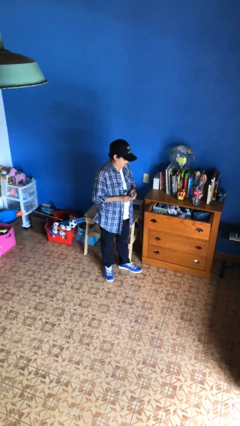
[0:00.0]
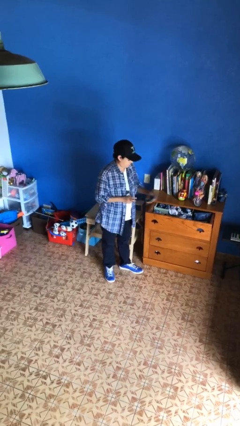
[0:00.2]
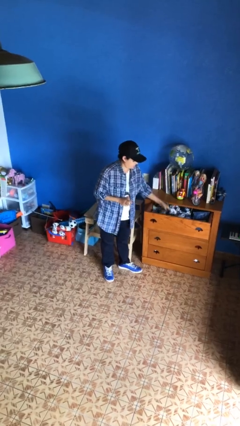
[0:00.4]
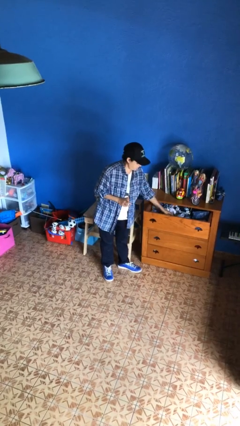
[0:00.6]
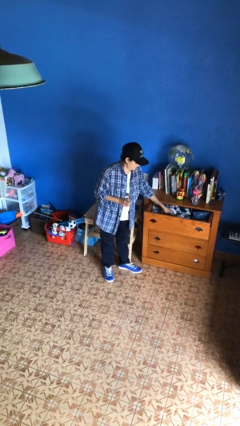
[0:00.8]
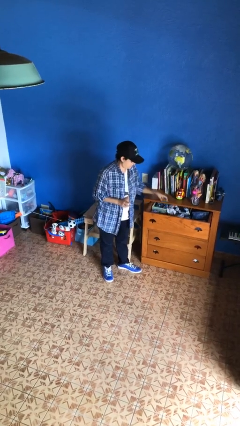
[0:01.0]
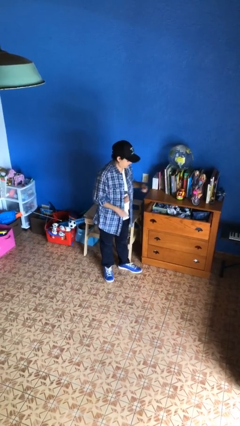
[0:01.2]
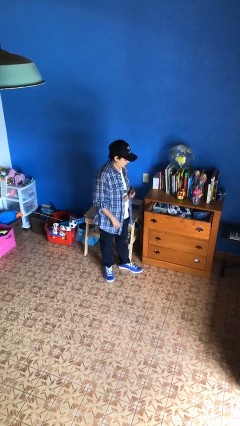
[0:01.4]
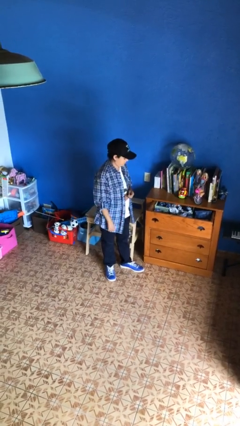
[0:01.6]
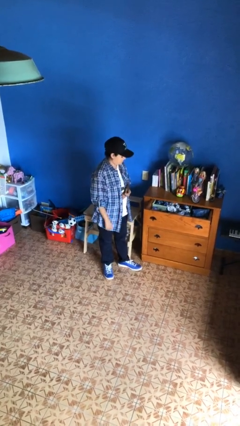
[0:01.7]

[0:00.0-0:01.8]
person puts clothes into dresser

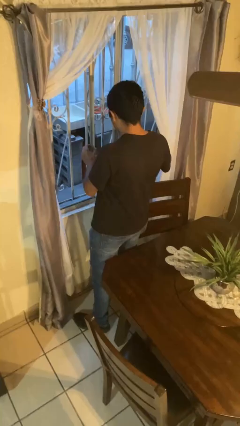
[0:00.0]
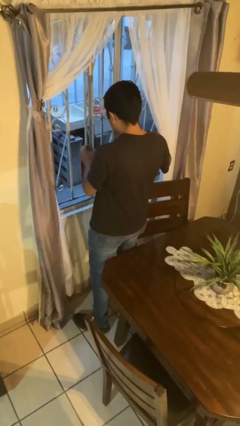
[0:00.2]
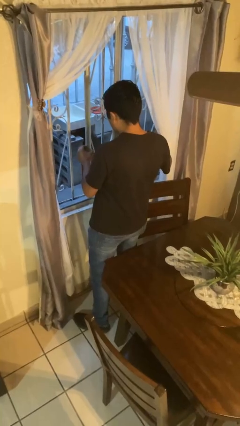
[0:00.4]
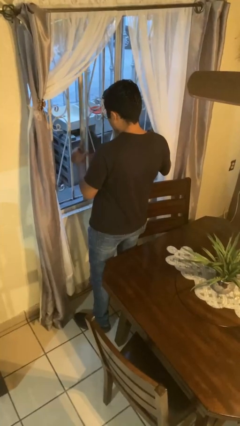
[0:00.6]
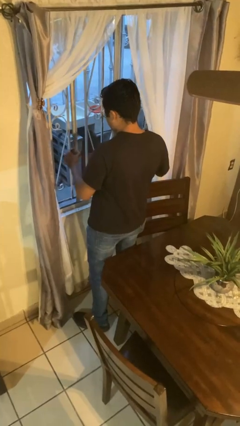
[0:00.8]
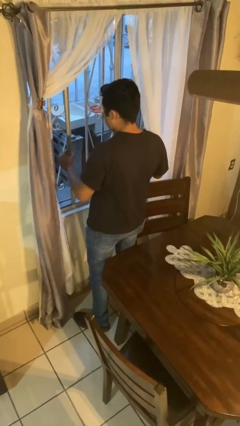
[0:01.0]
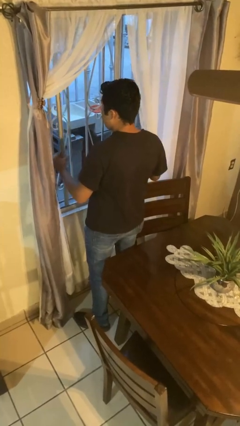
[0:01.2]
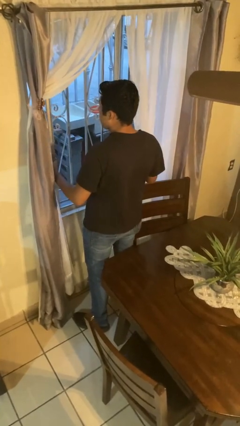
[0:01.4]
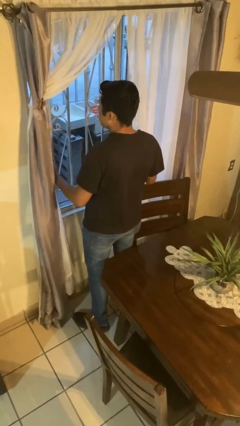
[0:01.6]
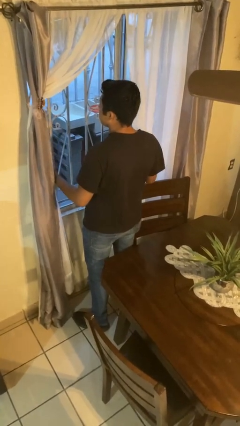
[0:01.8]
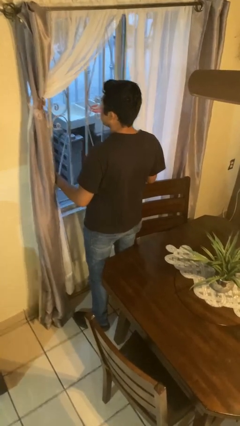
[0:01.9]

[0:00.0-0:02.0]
person closes home window

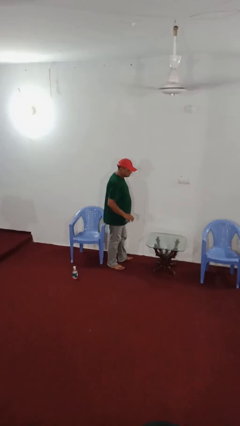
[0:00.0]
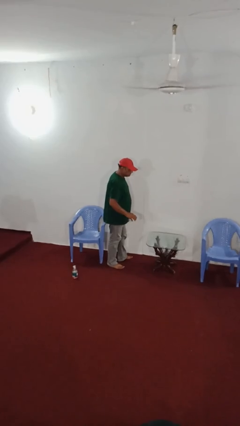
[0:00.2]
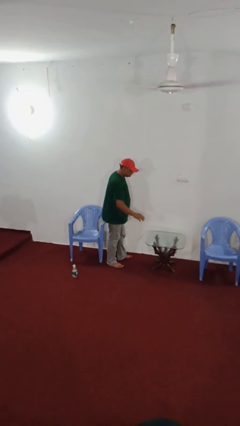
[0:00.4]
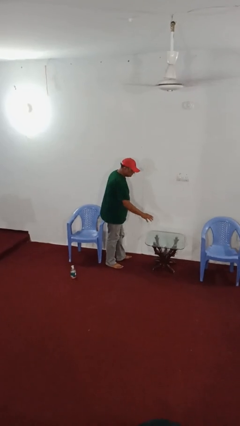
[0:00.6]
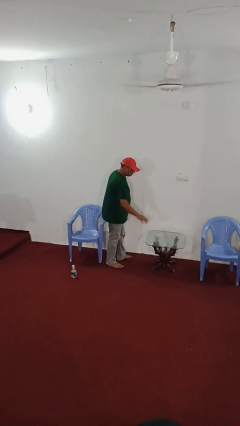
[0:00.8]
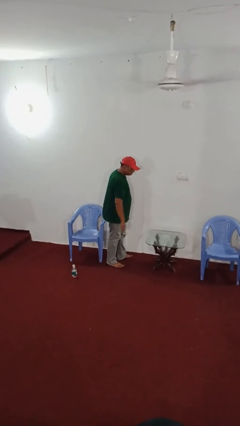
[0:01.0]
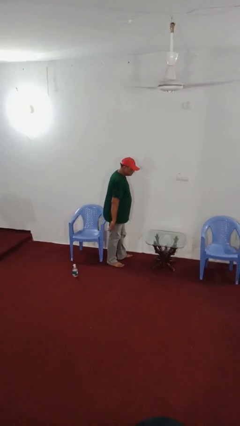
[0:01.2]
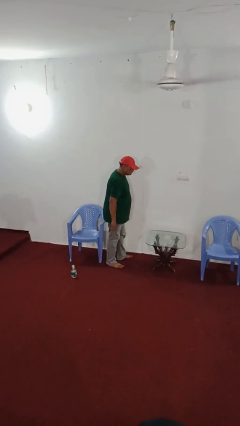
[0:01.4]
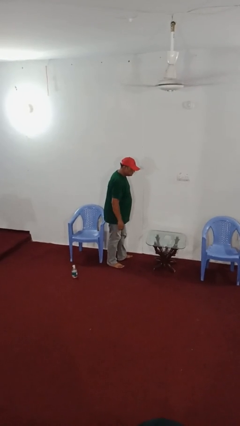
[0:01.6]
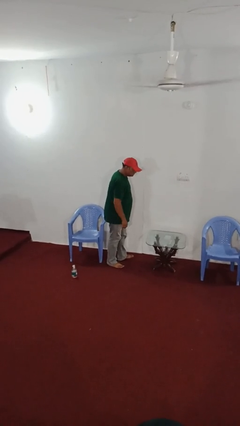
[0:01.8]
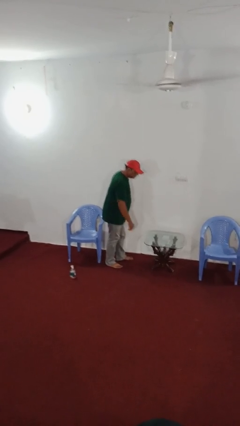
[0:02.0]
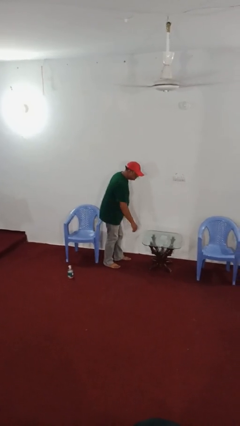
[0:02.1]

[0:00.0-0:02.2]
person throws object on table

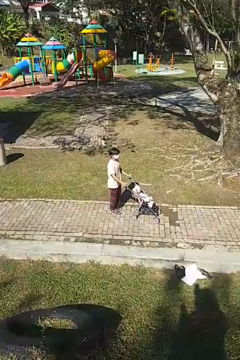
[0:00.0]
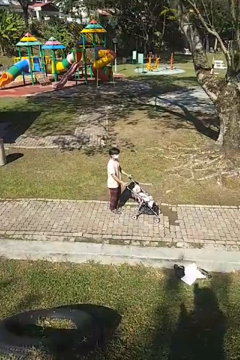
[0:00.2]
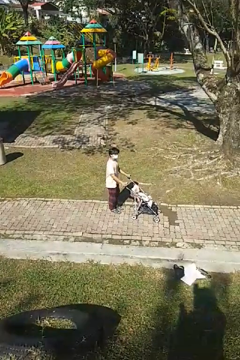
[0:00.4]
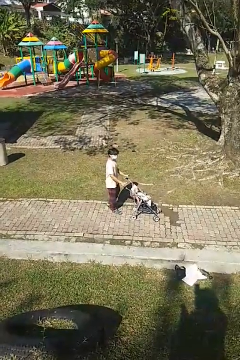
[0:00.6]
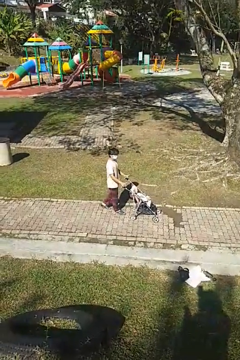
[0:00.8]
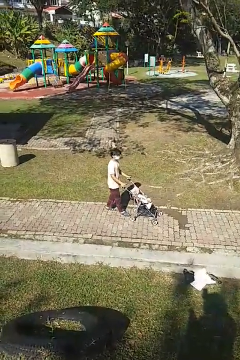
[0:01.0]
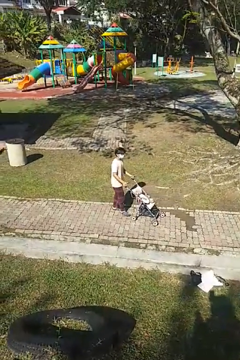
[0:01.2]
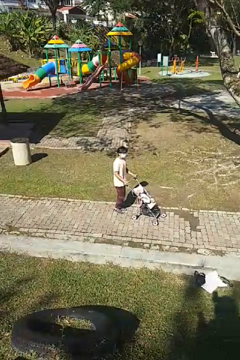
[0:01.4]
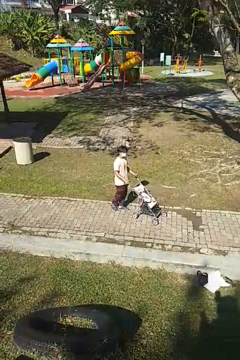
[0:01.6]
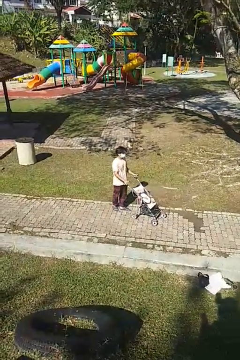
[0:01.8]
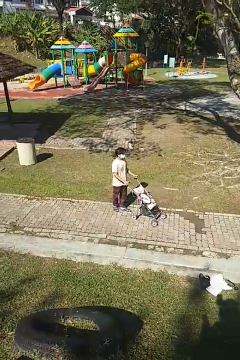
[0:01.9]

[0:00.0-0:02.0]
person pulls wheeled cart

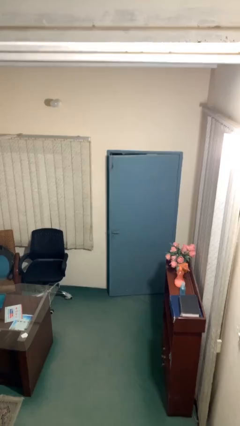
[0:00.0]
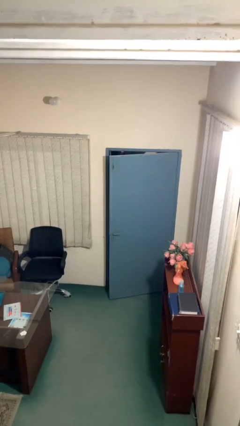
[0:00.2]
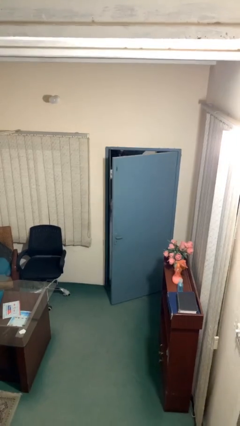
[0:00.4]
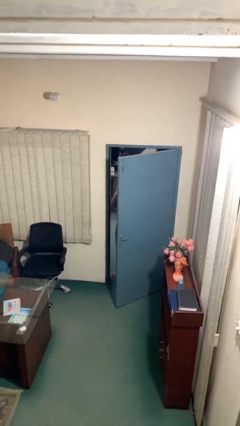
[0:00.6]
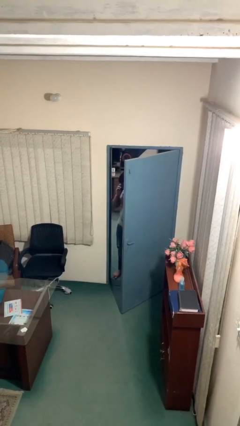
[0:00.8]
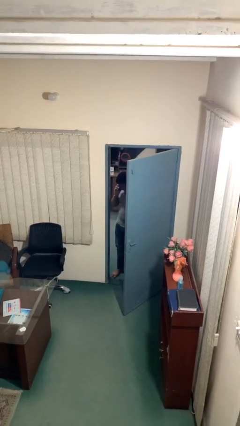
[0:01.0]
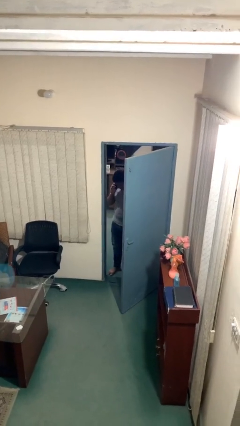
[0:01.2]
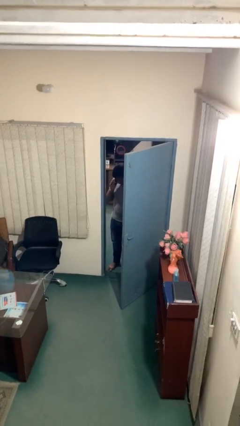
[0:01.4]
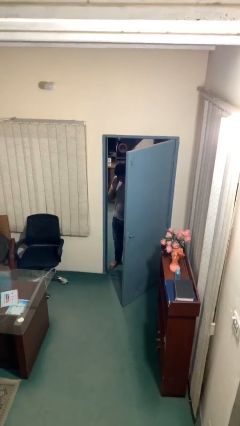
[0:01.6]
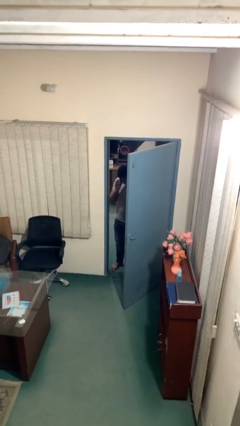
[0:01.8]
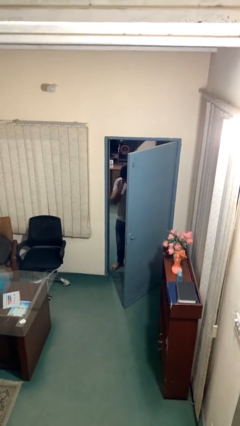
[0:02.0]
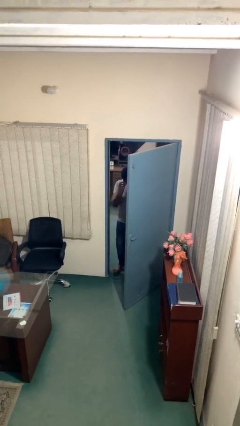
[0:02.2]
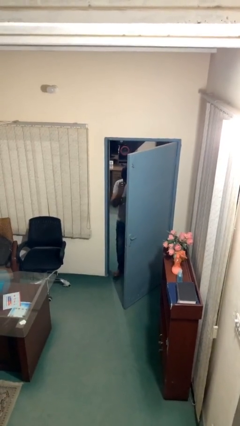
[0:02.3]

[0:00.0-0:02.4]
person opens facility door

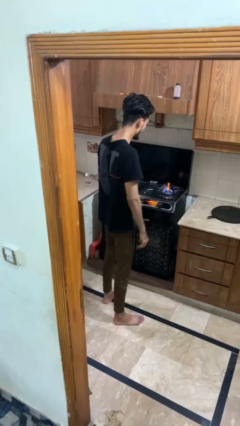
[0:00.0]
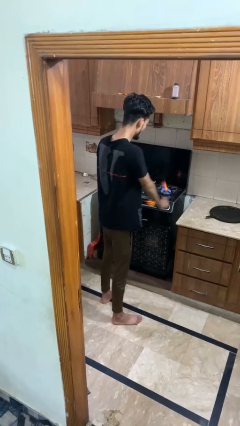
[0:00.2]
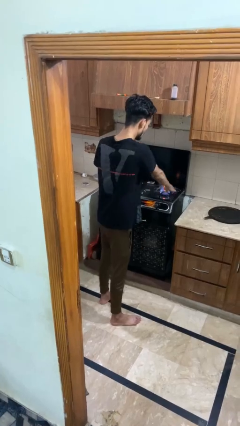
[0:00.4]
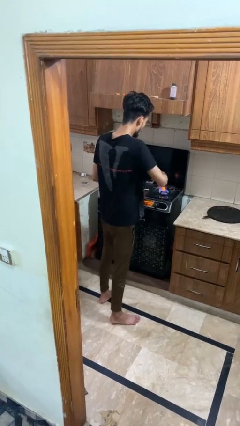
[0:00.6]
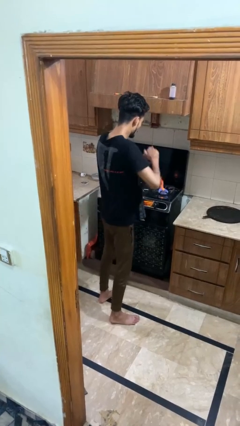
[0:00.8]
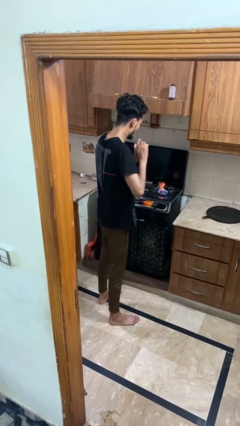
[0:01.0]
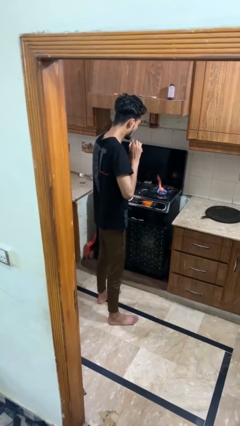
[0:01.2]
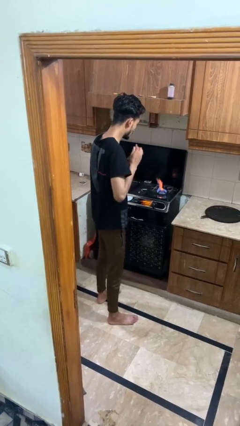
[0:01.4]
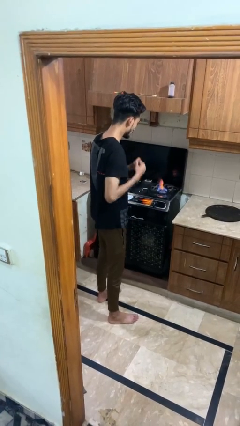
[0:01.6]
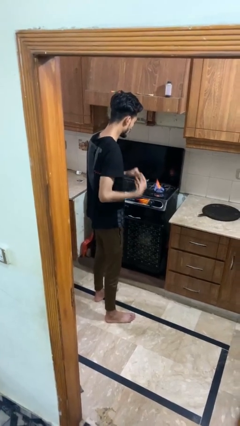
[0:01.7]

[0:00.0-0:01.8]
person burns hand

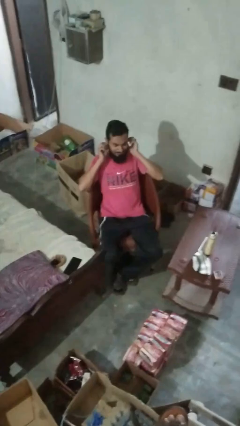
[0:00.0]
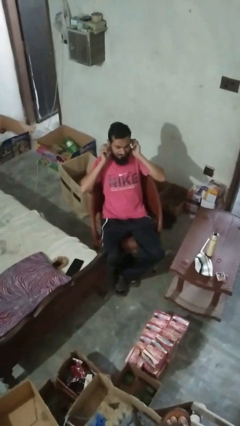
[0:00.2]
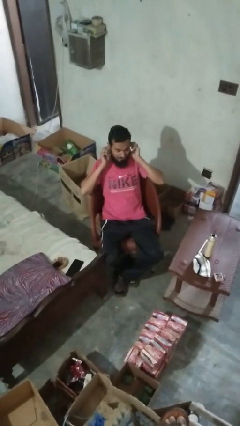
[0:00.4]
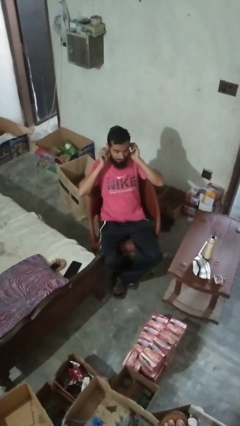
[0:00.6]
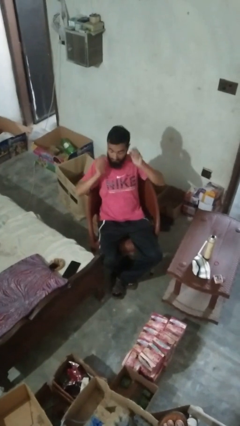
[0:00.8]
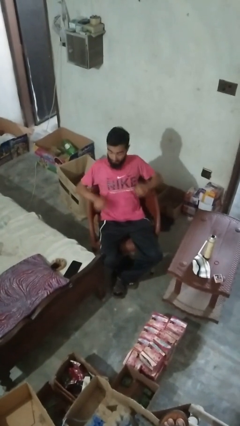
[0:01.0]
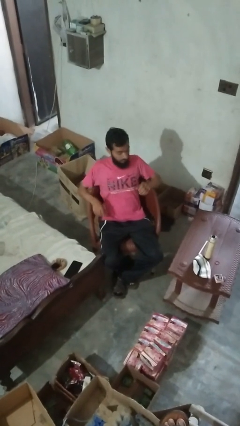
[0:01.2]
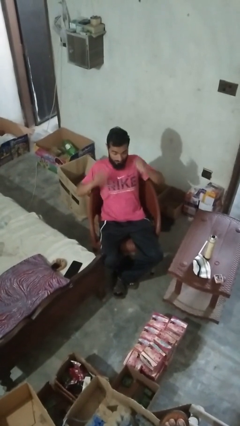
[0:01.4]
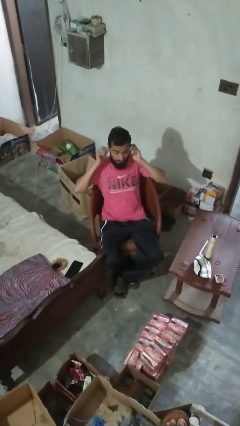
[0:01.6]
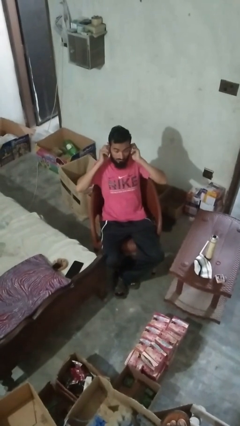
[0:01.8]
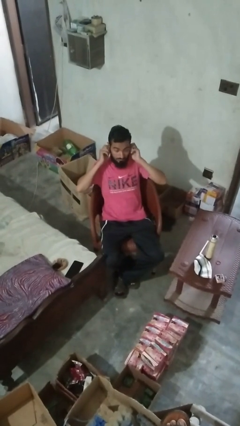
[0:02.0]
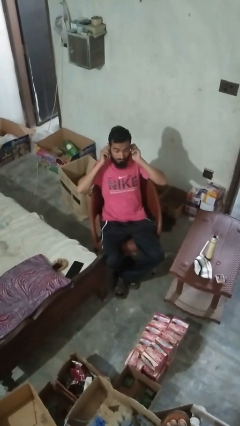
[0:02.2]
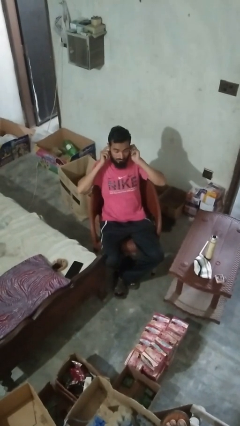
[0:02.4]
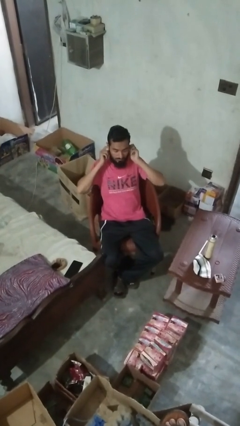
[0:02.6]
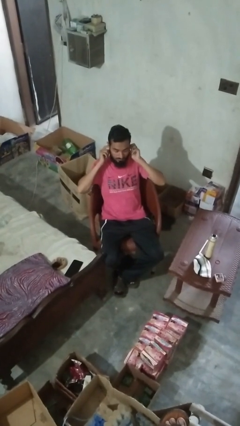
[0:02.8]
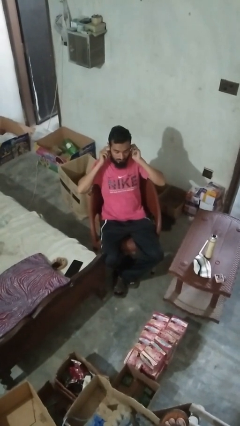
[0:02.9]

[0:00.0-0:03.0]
person puts fingers in ear

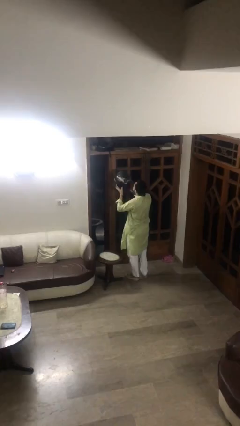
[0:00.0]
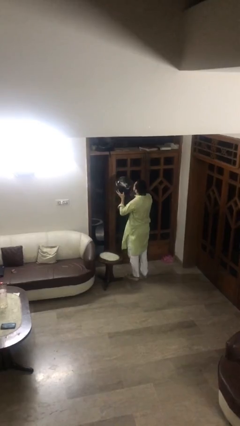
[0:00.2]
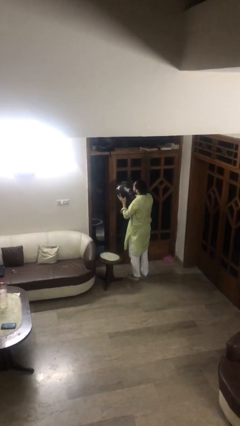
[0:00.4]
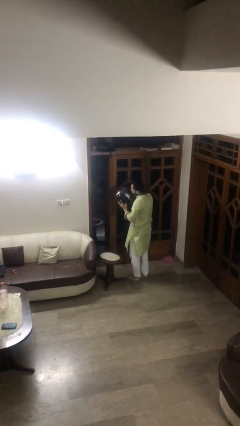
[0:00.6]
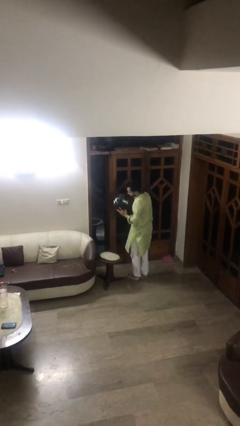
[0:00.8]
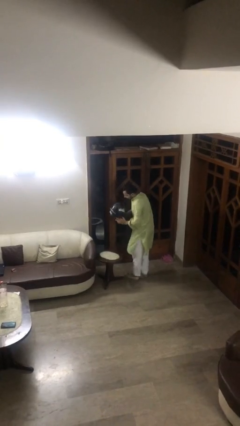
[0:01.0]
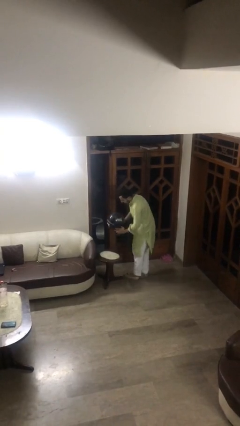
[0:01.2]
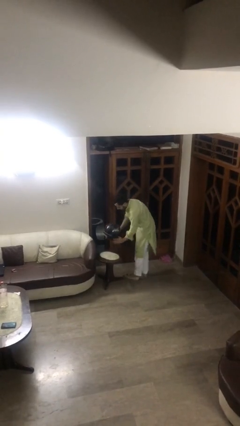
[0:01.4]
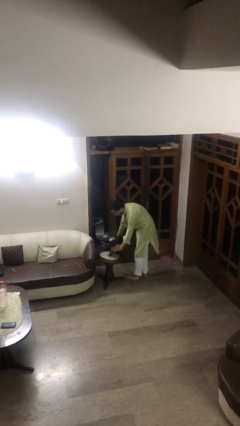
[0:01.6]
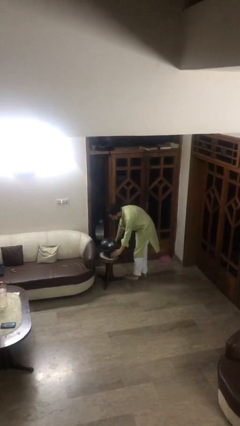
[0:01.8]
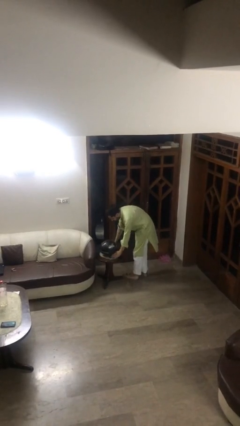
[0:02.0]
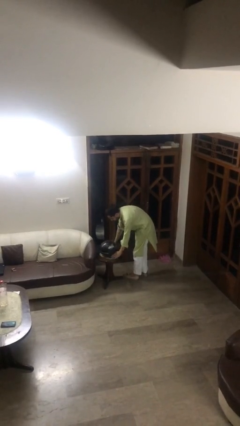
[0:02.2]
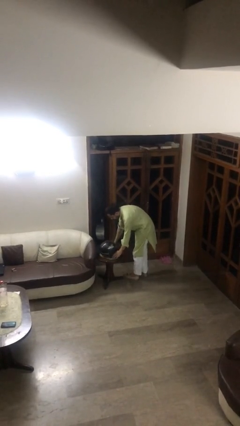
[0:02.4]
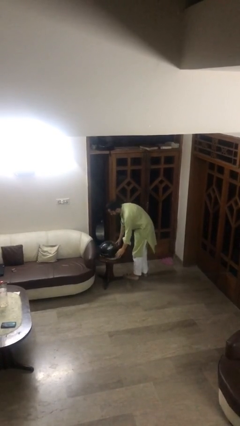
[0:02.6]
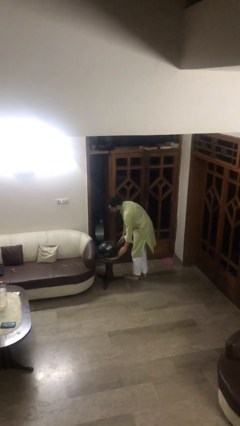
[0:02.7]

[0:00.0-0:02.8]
person puts down object on table
